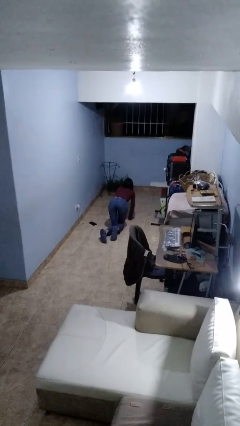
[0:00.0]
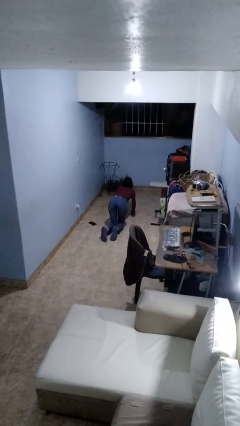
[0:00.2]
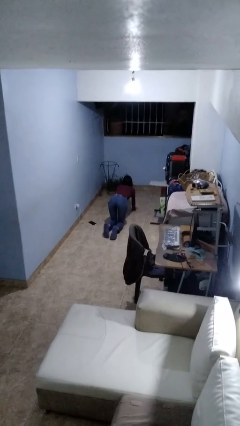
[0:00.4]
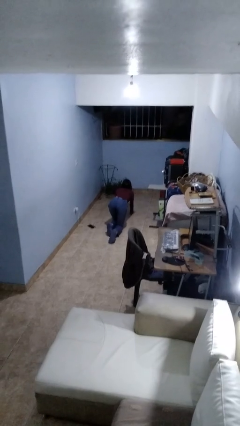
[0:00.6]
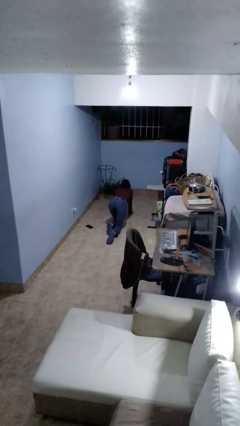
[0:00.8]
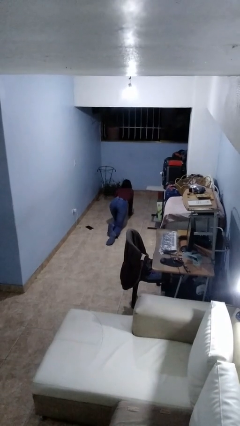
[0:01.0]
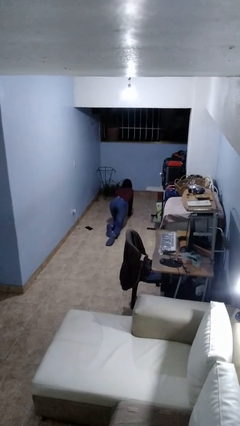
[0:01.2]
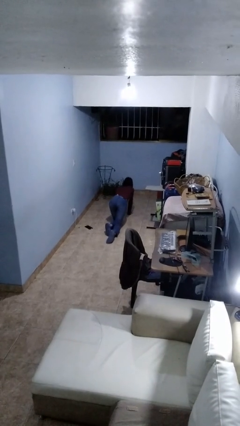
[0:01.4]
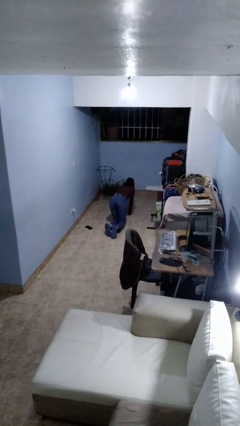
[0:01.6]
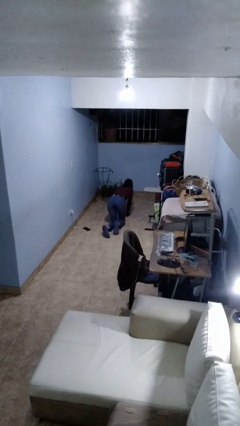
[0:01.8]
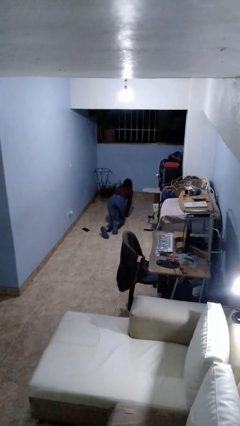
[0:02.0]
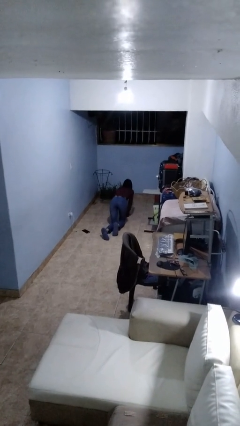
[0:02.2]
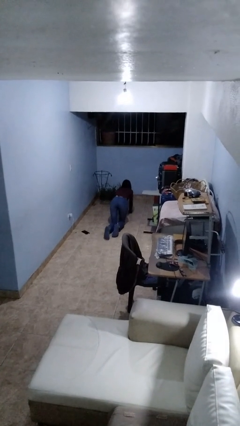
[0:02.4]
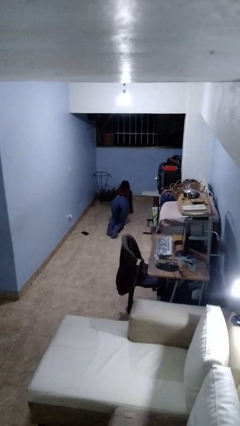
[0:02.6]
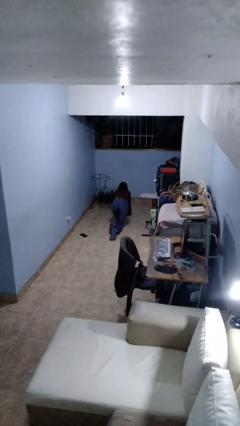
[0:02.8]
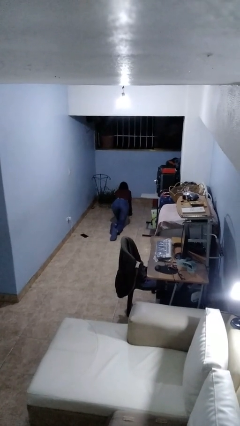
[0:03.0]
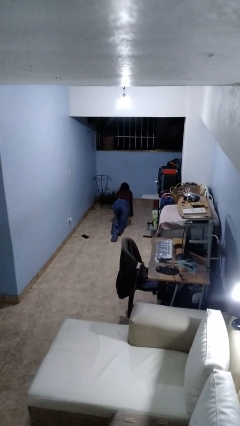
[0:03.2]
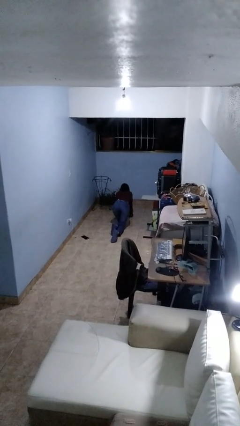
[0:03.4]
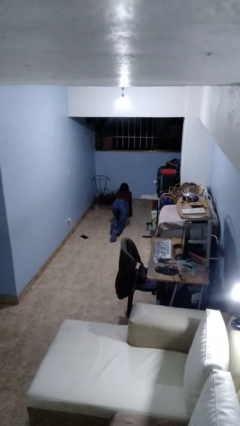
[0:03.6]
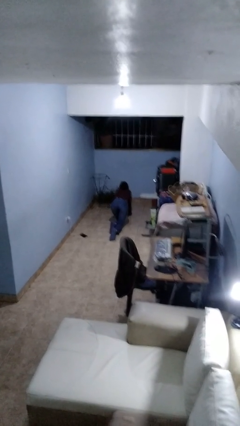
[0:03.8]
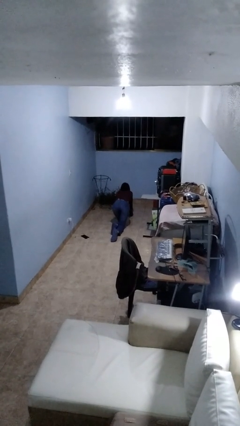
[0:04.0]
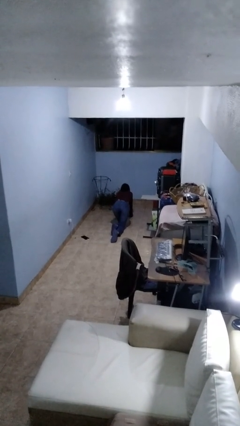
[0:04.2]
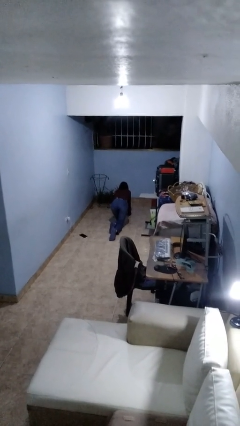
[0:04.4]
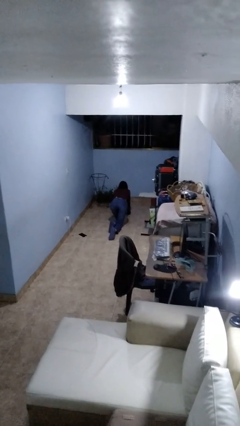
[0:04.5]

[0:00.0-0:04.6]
person crawls

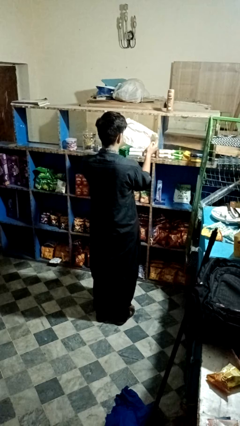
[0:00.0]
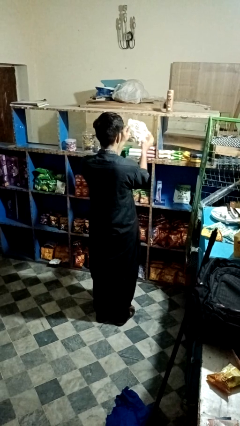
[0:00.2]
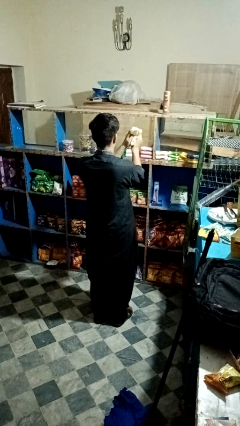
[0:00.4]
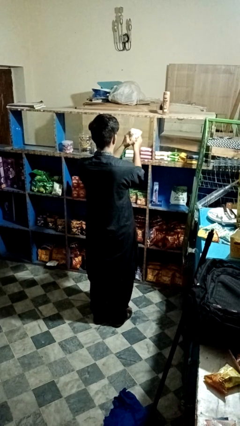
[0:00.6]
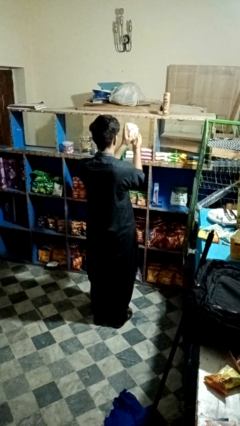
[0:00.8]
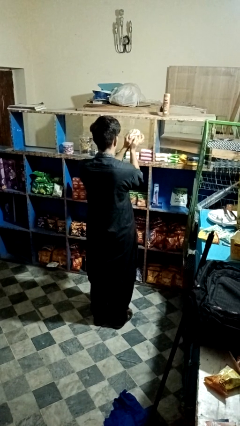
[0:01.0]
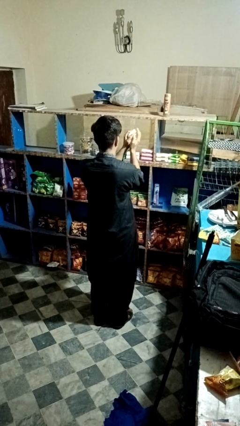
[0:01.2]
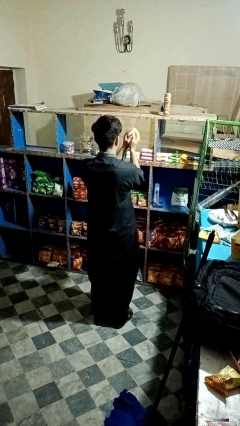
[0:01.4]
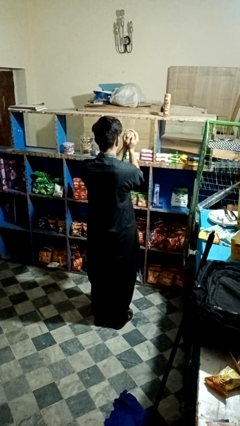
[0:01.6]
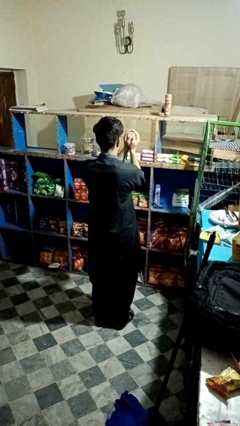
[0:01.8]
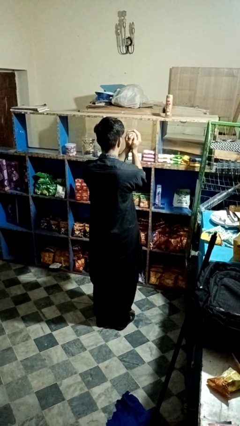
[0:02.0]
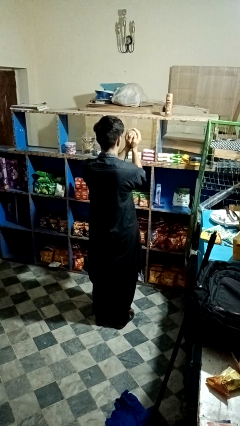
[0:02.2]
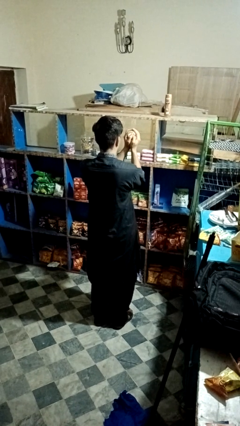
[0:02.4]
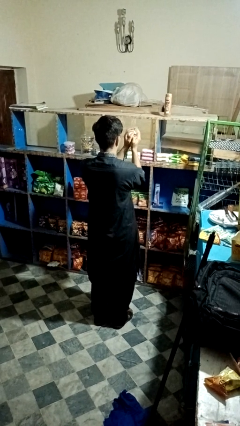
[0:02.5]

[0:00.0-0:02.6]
person crumples paper

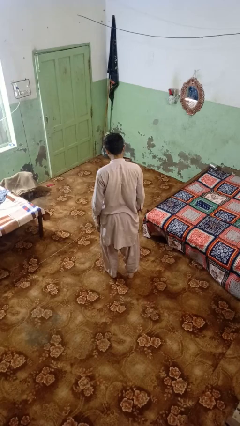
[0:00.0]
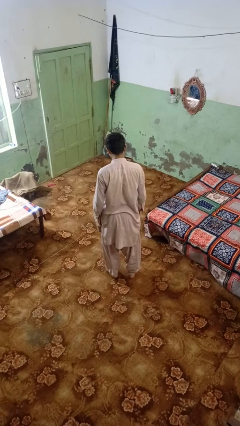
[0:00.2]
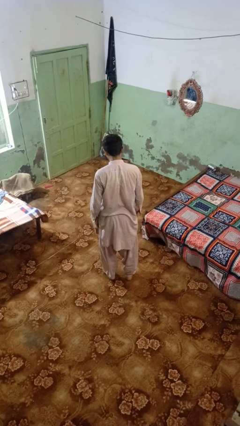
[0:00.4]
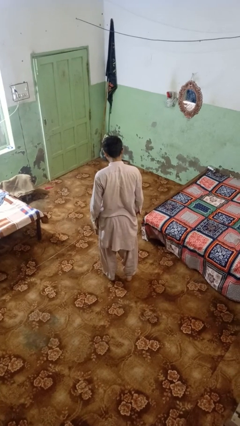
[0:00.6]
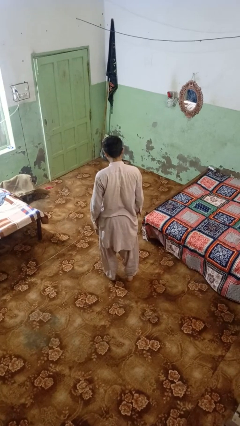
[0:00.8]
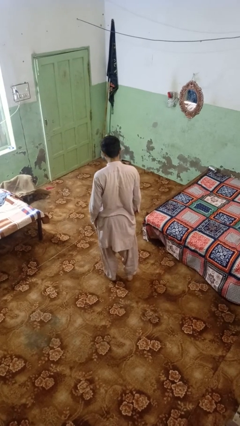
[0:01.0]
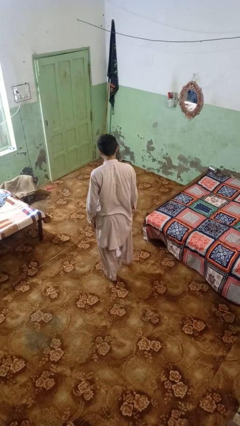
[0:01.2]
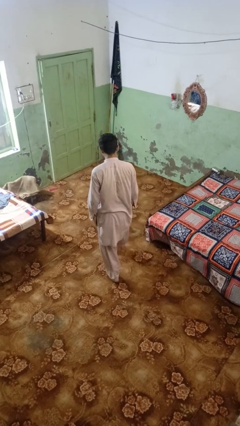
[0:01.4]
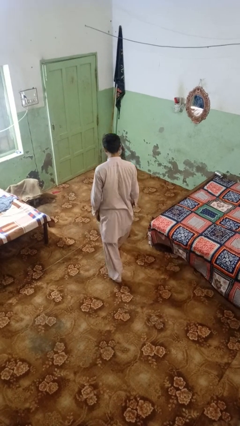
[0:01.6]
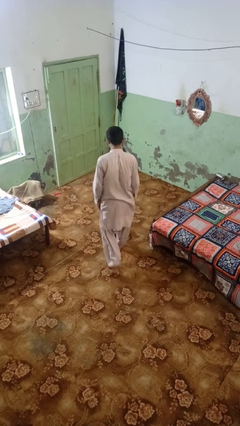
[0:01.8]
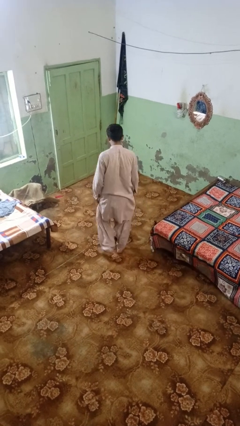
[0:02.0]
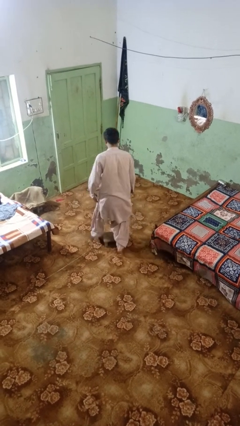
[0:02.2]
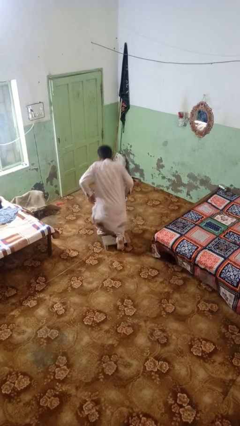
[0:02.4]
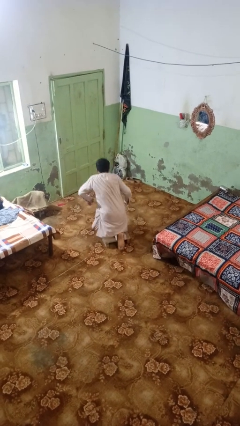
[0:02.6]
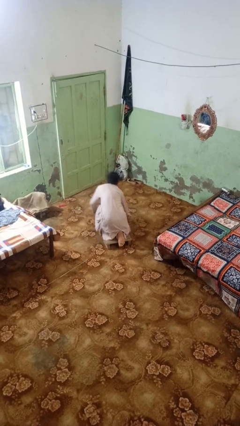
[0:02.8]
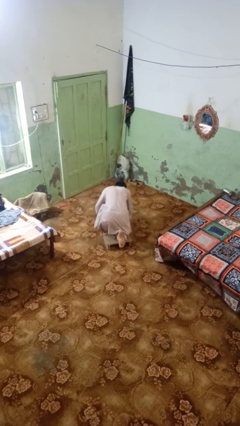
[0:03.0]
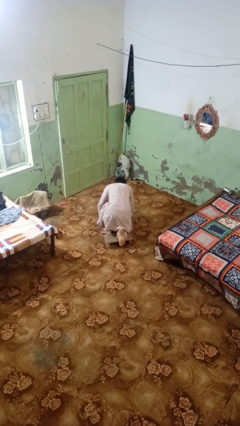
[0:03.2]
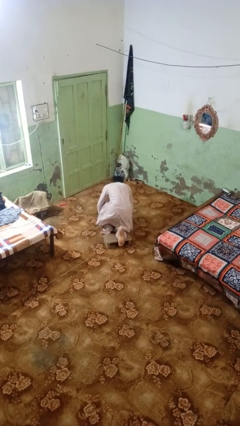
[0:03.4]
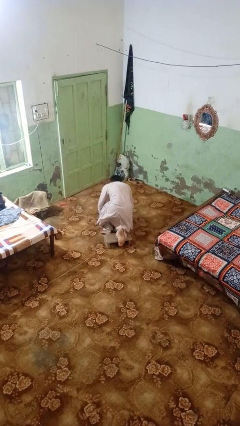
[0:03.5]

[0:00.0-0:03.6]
person trips on object on floor

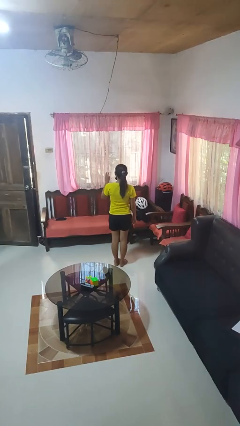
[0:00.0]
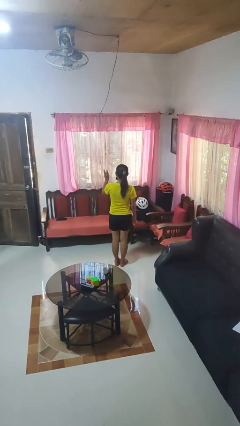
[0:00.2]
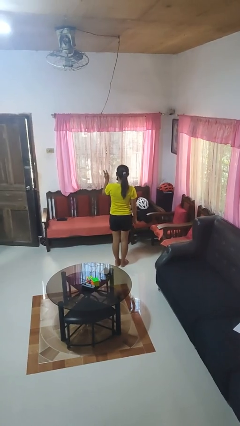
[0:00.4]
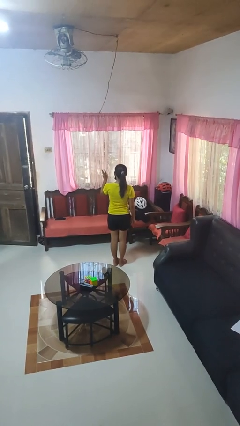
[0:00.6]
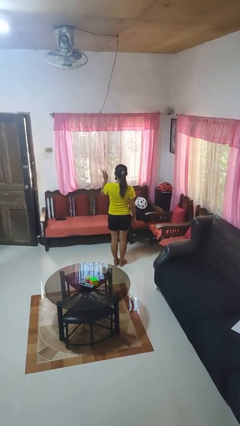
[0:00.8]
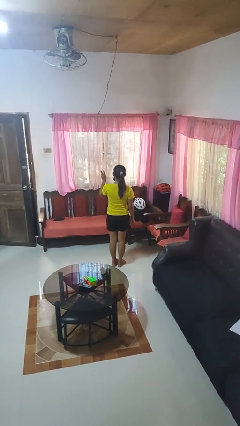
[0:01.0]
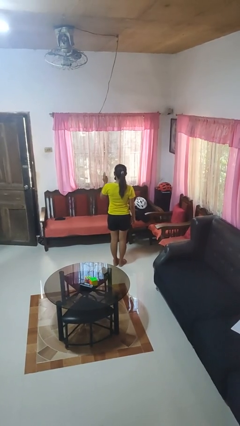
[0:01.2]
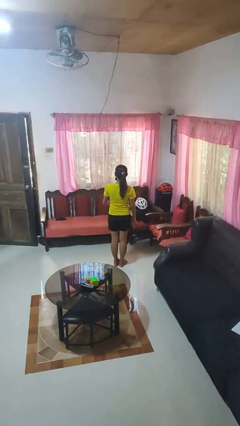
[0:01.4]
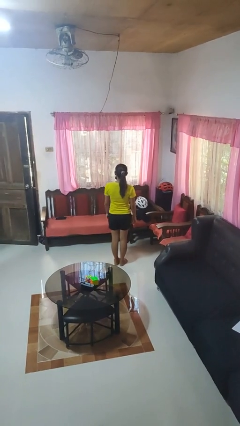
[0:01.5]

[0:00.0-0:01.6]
person gestures number three

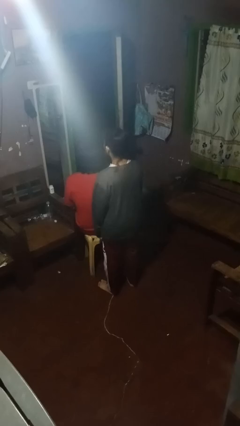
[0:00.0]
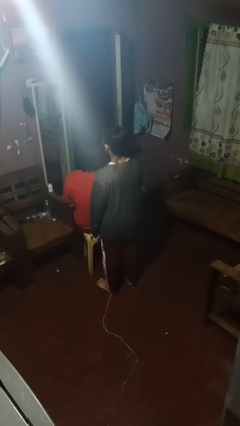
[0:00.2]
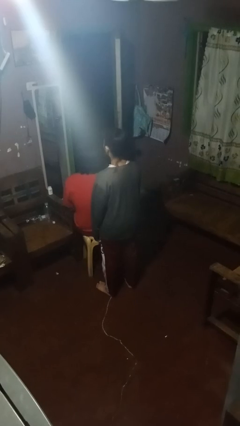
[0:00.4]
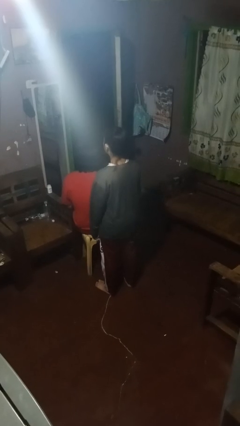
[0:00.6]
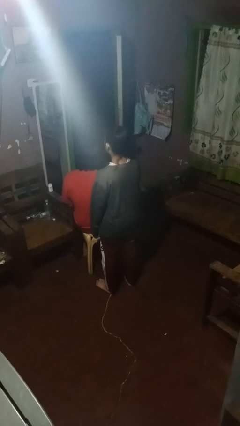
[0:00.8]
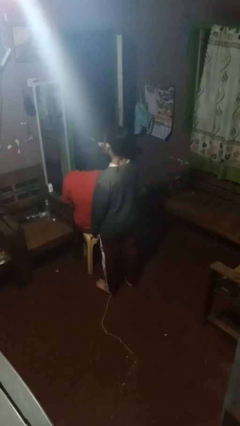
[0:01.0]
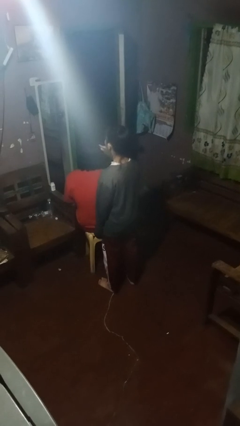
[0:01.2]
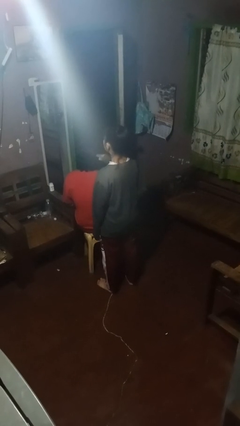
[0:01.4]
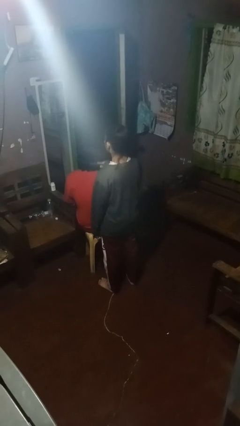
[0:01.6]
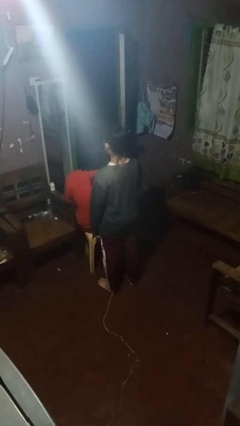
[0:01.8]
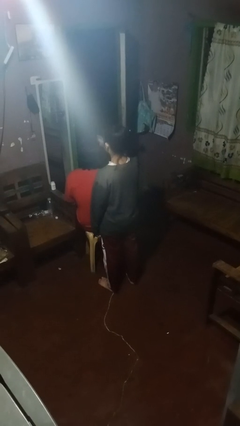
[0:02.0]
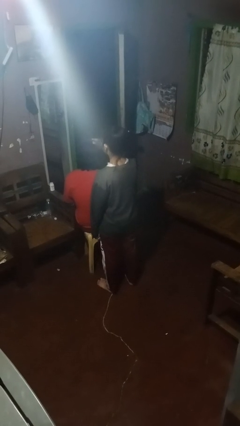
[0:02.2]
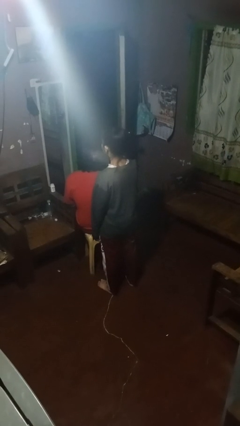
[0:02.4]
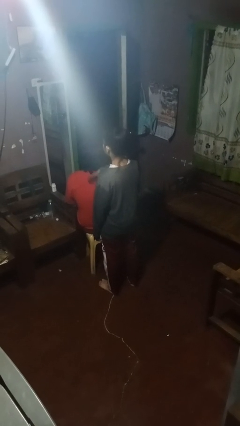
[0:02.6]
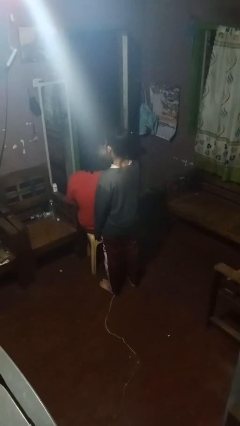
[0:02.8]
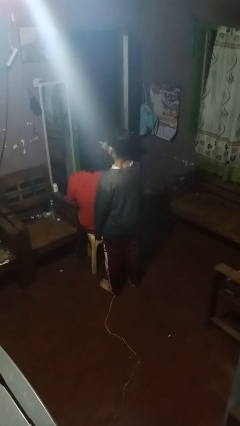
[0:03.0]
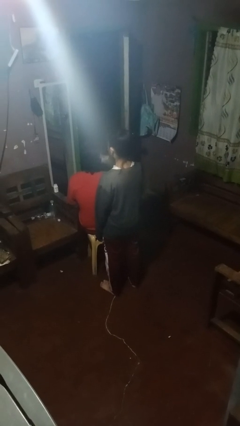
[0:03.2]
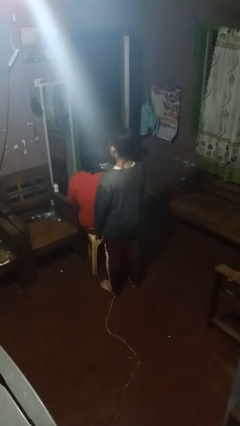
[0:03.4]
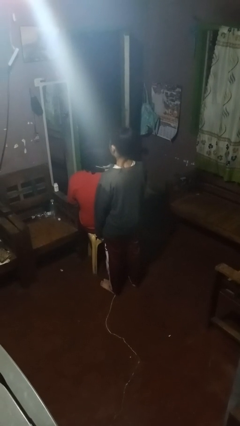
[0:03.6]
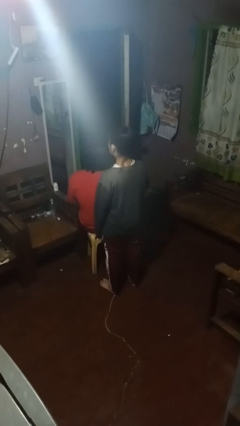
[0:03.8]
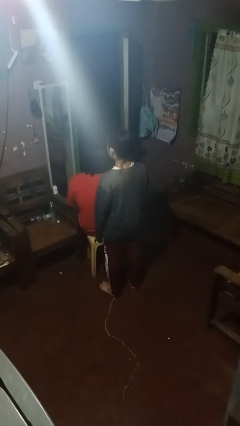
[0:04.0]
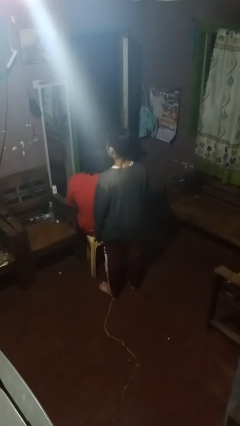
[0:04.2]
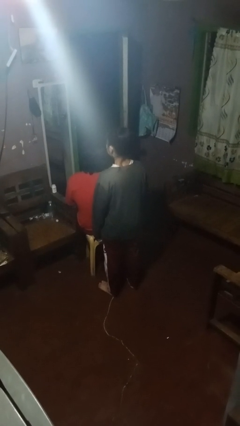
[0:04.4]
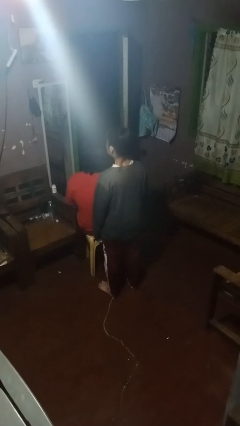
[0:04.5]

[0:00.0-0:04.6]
person brushes hair of person

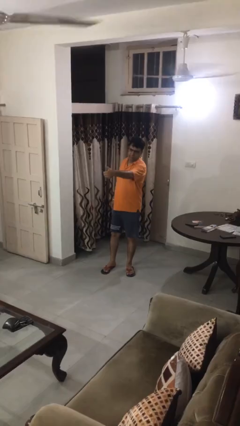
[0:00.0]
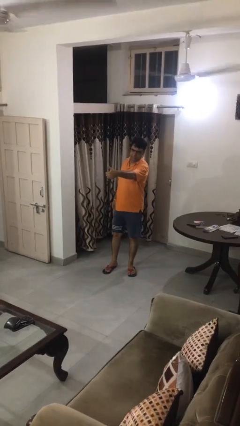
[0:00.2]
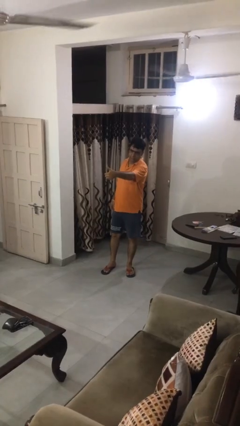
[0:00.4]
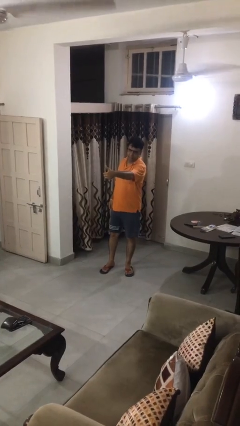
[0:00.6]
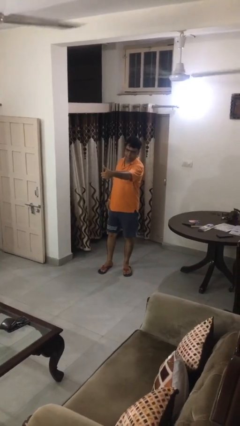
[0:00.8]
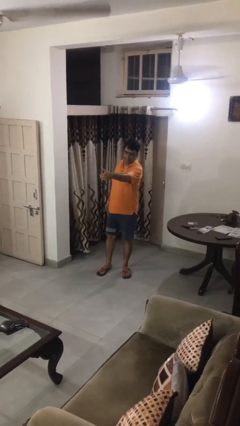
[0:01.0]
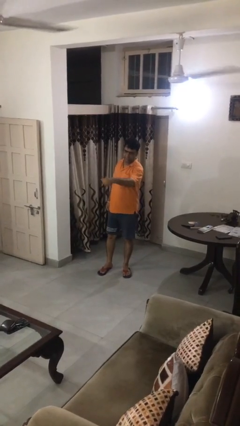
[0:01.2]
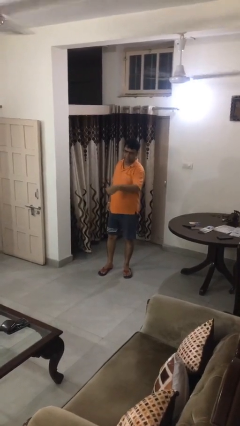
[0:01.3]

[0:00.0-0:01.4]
person gestures thumbs up
